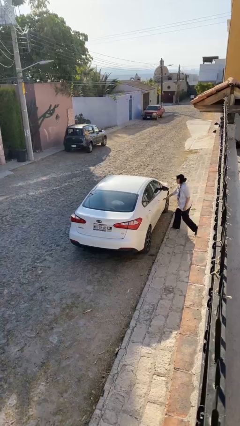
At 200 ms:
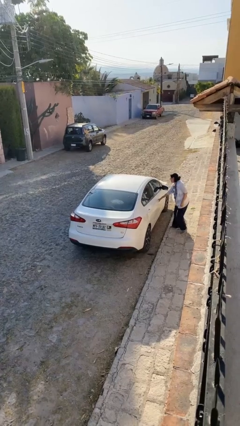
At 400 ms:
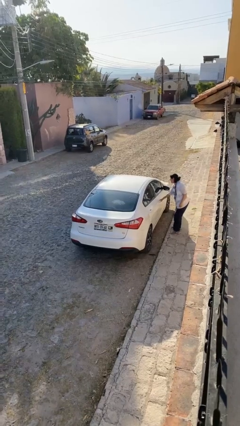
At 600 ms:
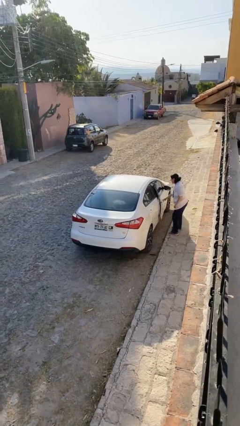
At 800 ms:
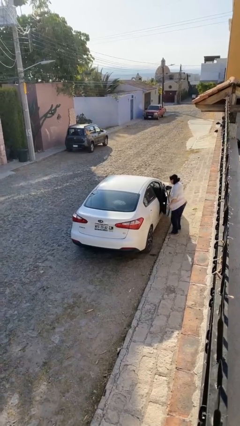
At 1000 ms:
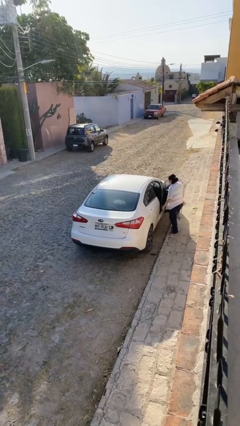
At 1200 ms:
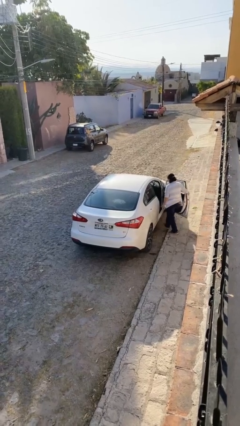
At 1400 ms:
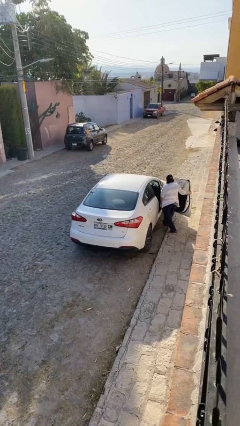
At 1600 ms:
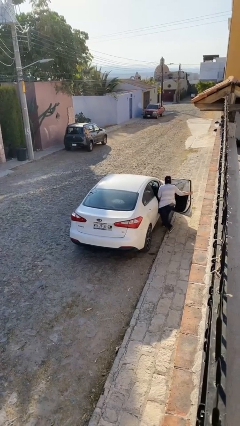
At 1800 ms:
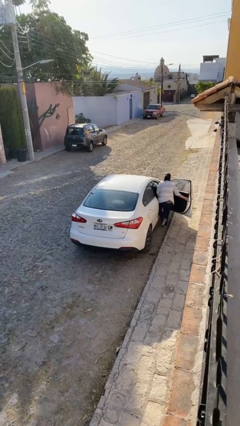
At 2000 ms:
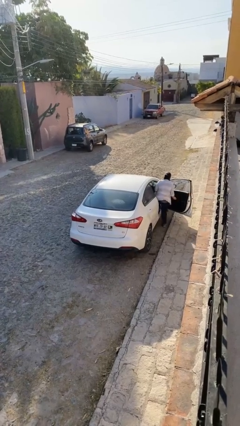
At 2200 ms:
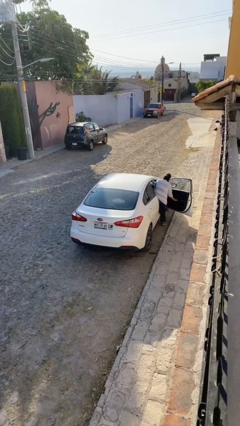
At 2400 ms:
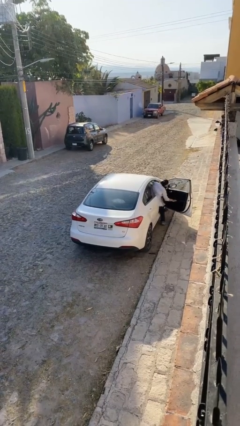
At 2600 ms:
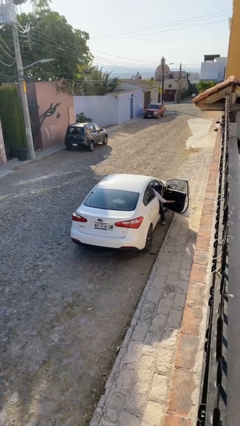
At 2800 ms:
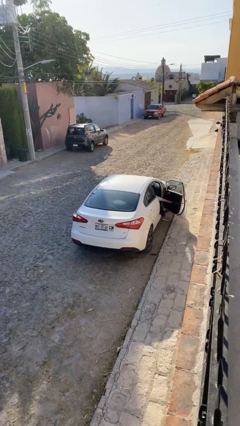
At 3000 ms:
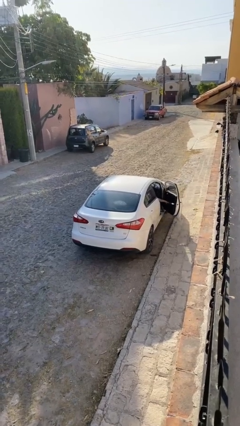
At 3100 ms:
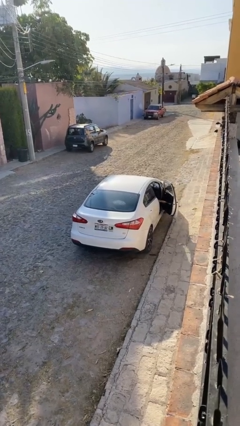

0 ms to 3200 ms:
car picks up person

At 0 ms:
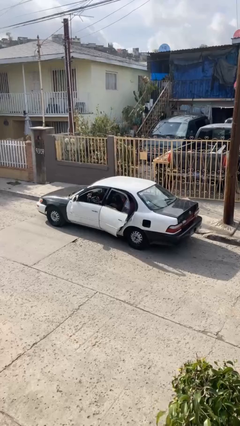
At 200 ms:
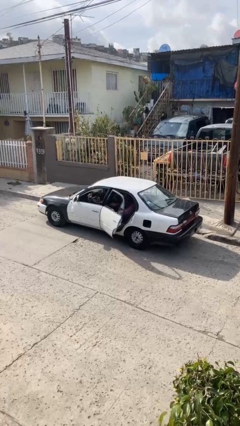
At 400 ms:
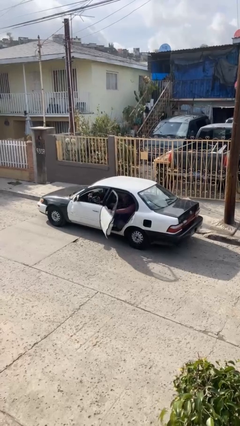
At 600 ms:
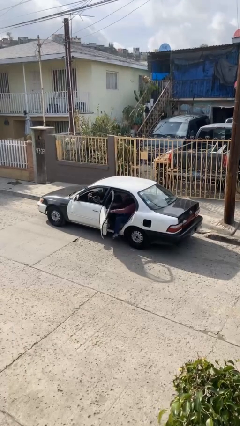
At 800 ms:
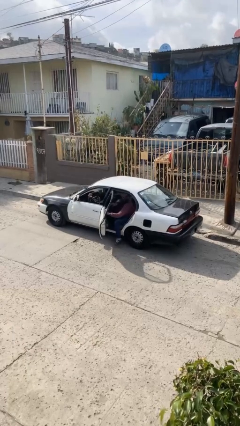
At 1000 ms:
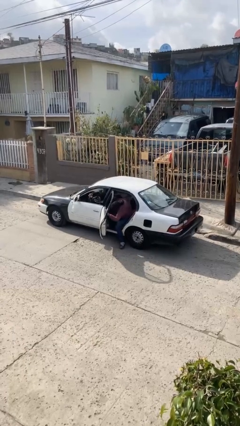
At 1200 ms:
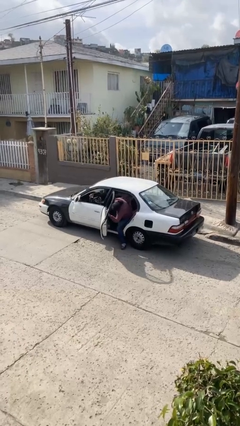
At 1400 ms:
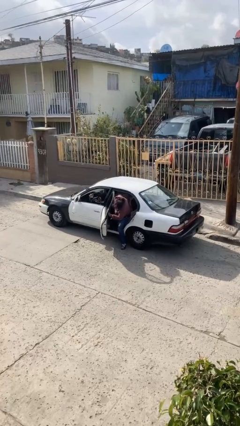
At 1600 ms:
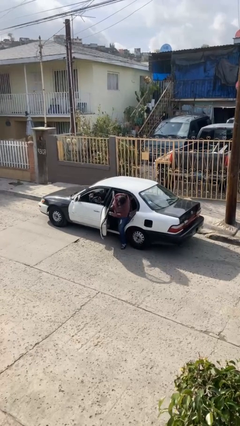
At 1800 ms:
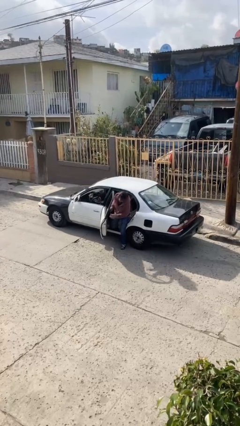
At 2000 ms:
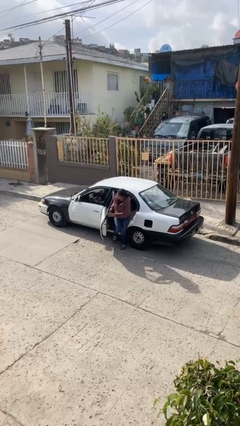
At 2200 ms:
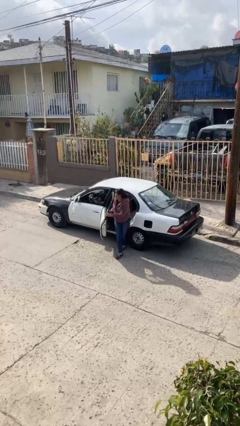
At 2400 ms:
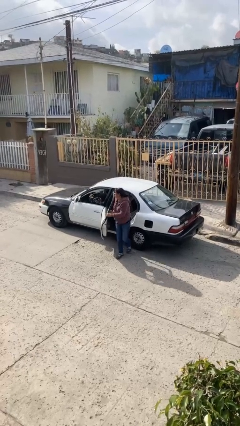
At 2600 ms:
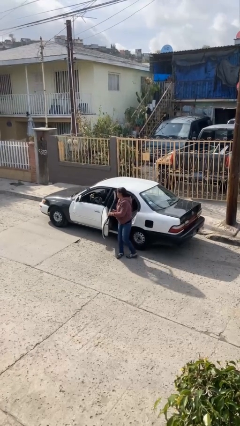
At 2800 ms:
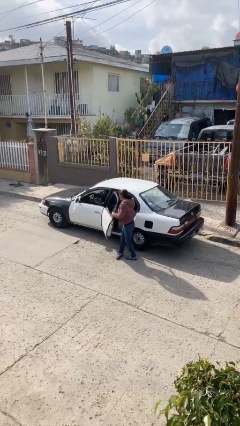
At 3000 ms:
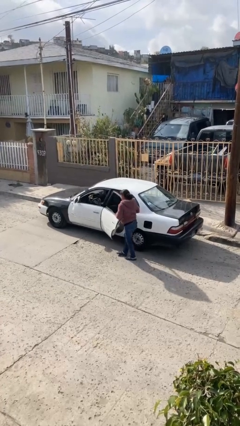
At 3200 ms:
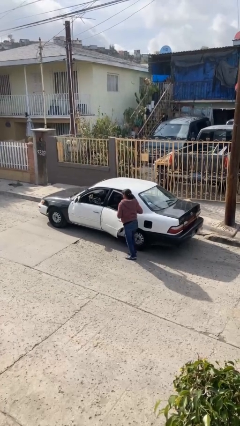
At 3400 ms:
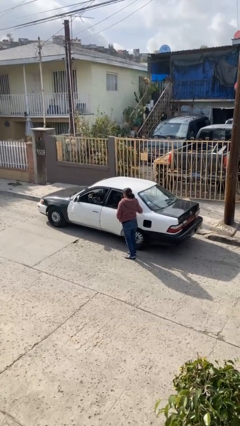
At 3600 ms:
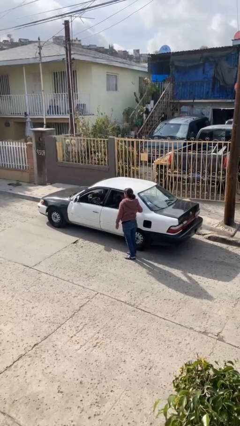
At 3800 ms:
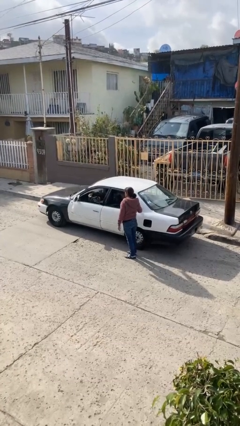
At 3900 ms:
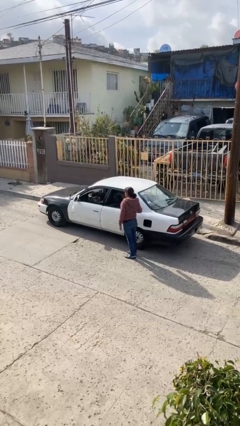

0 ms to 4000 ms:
car drops off person

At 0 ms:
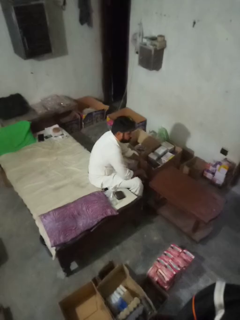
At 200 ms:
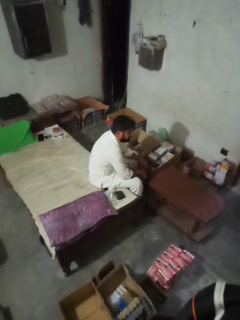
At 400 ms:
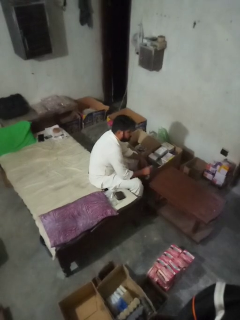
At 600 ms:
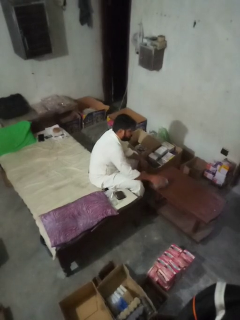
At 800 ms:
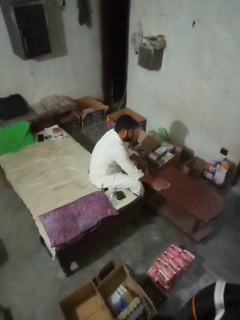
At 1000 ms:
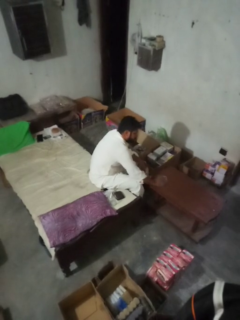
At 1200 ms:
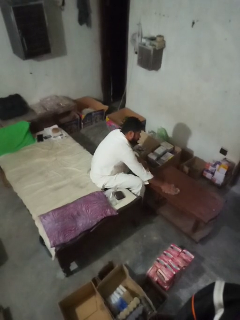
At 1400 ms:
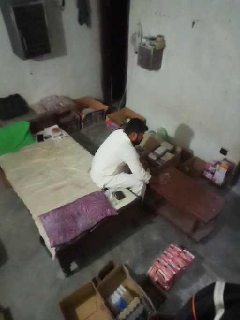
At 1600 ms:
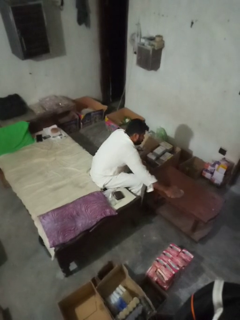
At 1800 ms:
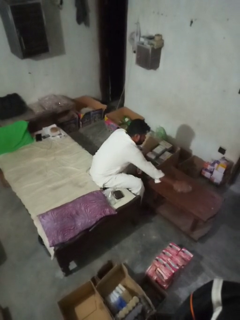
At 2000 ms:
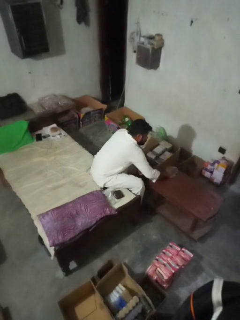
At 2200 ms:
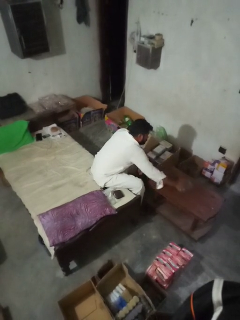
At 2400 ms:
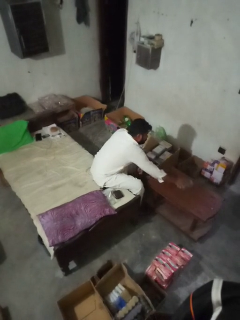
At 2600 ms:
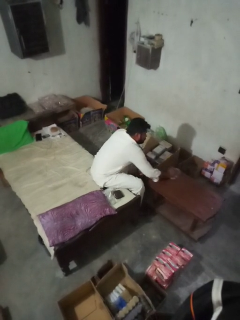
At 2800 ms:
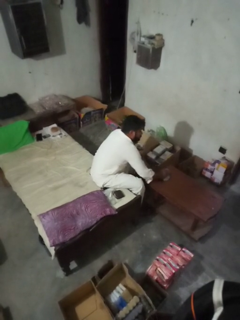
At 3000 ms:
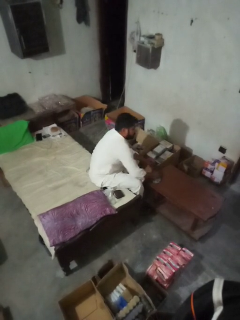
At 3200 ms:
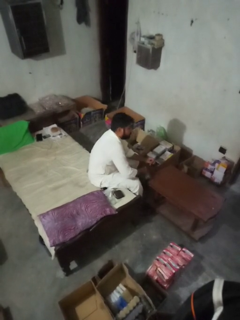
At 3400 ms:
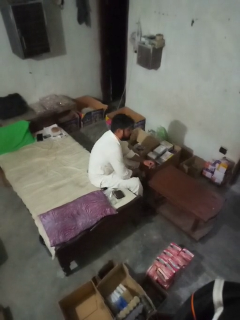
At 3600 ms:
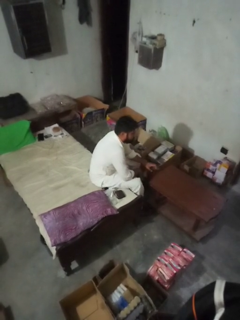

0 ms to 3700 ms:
person cleans table with rag

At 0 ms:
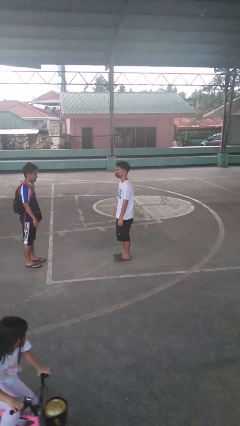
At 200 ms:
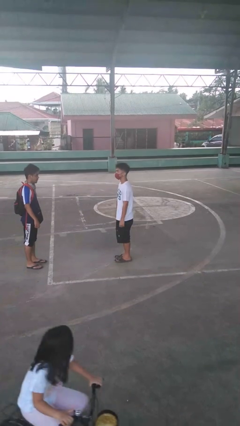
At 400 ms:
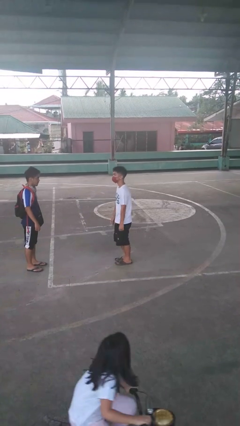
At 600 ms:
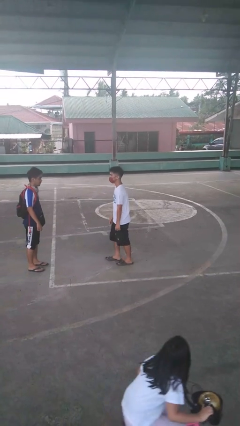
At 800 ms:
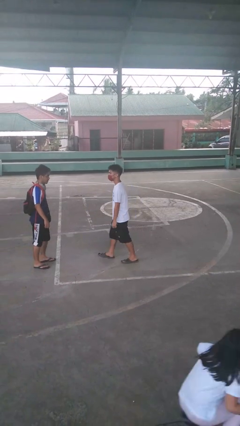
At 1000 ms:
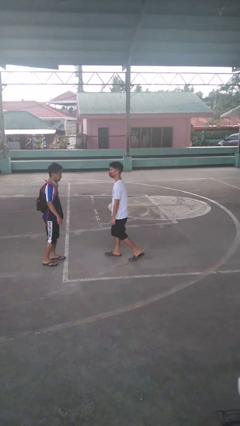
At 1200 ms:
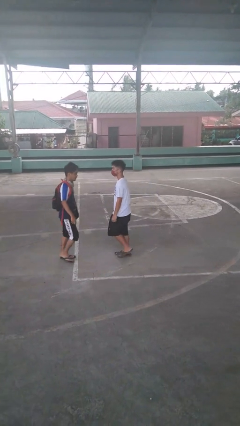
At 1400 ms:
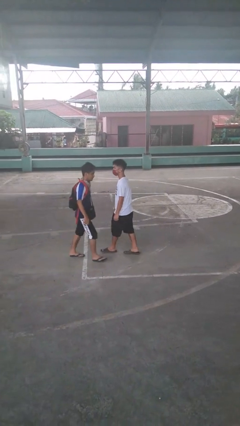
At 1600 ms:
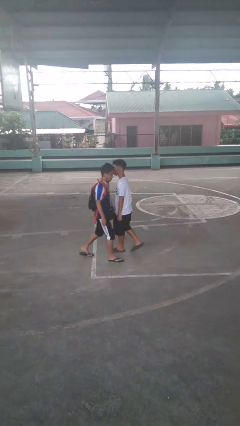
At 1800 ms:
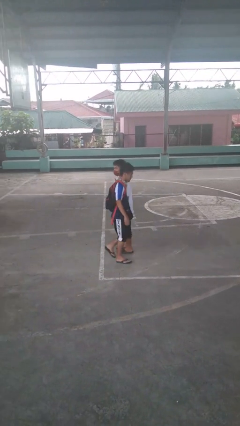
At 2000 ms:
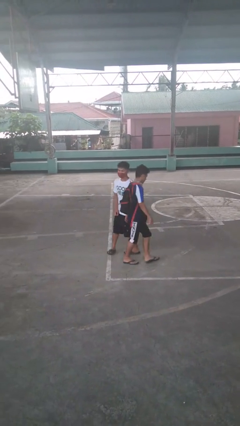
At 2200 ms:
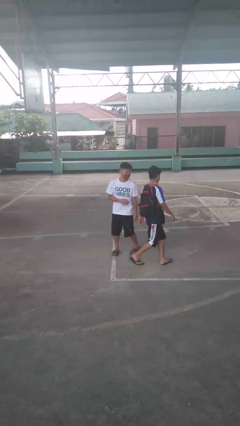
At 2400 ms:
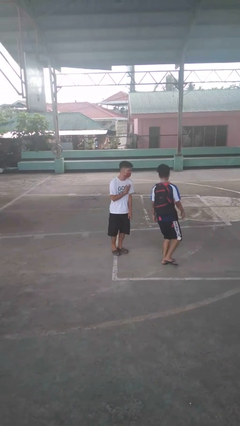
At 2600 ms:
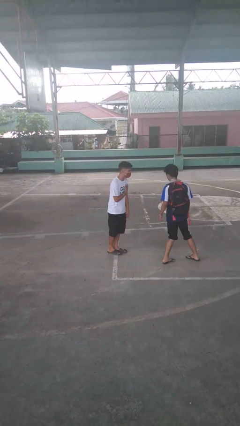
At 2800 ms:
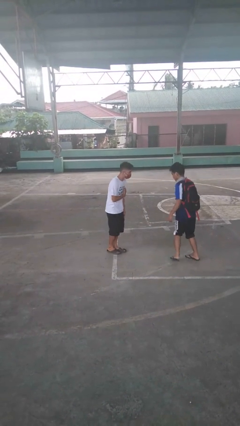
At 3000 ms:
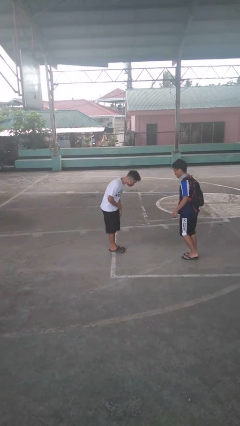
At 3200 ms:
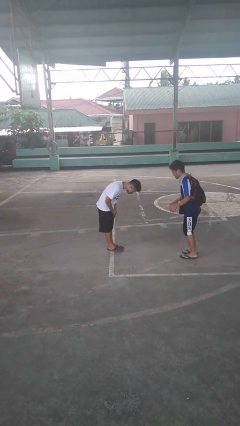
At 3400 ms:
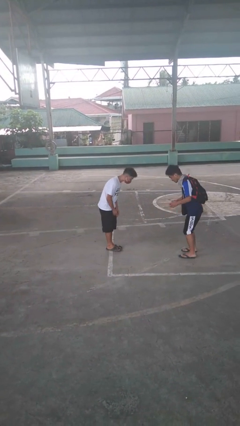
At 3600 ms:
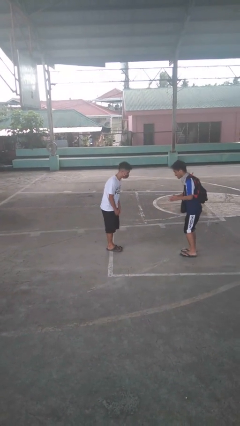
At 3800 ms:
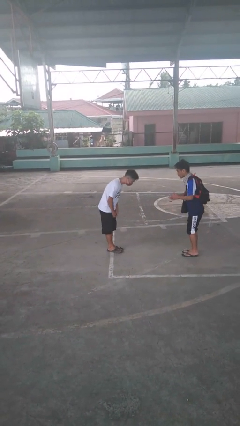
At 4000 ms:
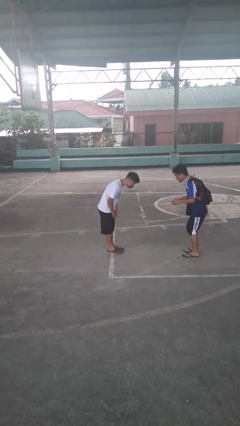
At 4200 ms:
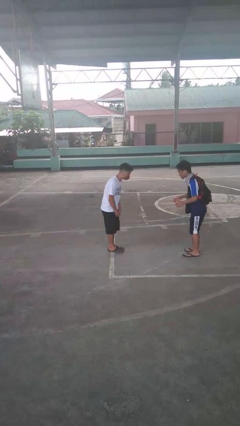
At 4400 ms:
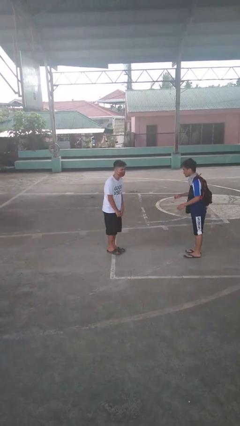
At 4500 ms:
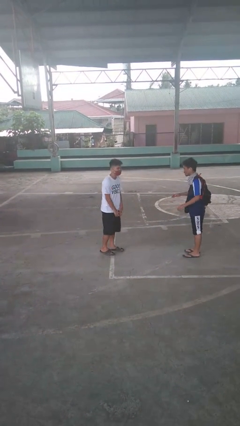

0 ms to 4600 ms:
person bumps into person

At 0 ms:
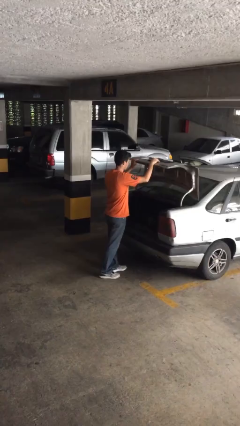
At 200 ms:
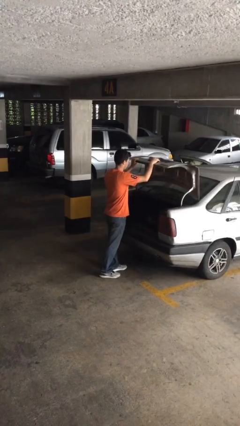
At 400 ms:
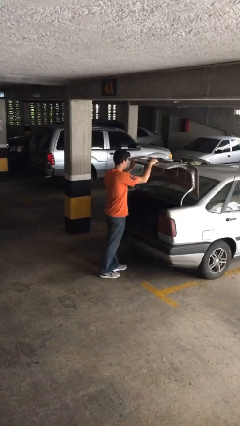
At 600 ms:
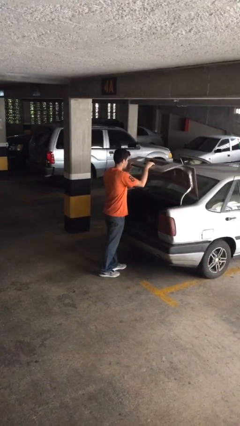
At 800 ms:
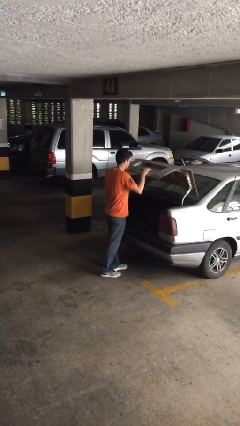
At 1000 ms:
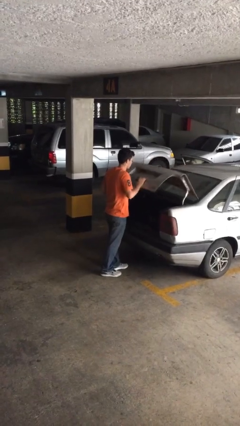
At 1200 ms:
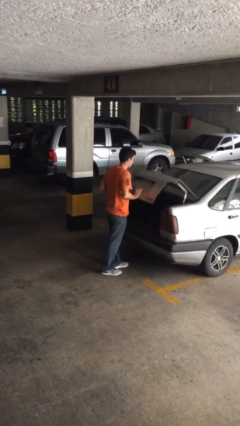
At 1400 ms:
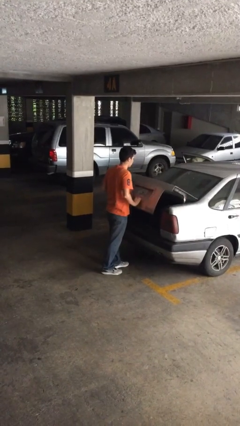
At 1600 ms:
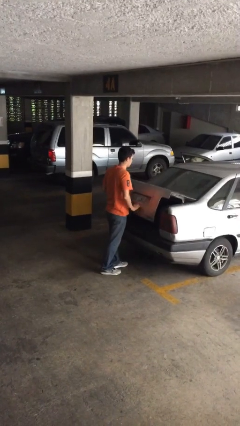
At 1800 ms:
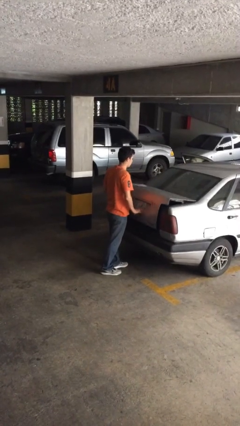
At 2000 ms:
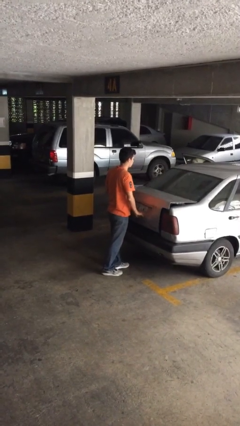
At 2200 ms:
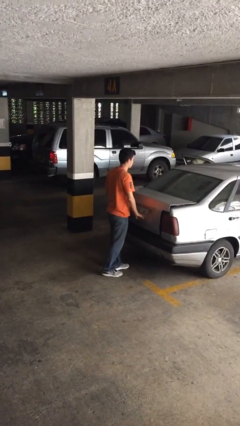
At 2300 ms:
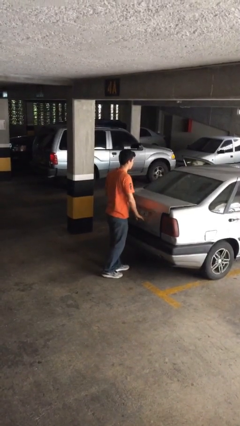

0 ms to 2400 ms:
person closes car trunk

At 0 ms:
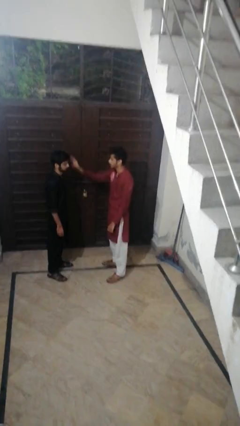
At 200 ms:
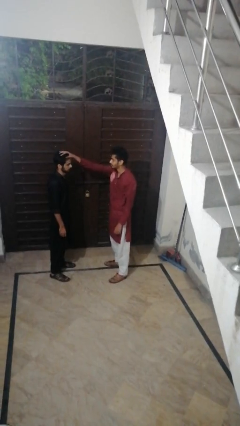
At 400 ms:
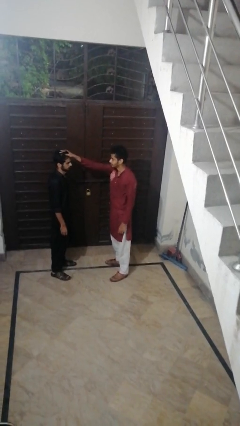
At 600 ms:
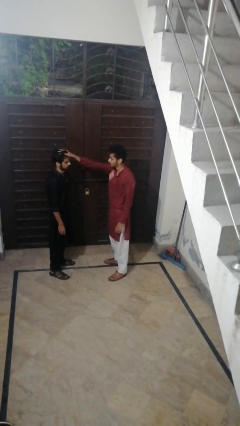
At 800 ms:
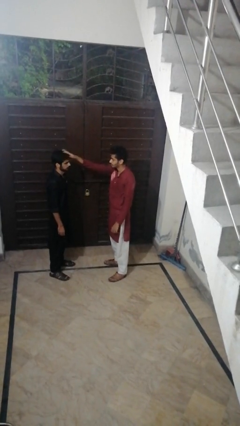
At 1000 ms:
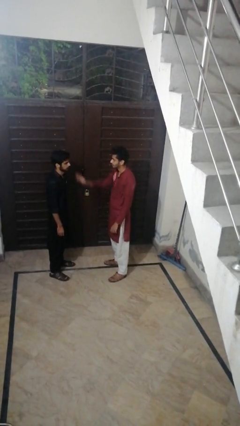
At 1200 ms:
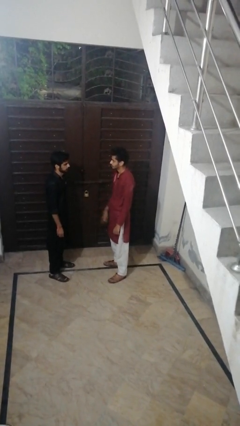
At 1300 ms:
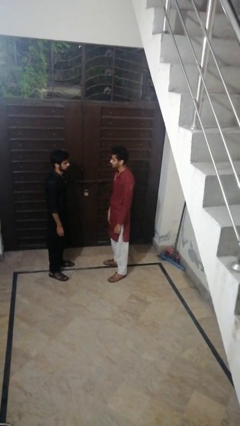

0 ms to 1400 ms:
person grabs person by hair
